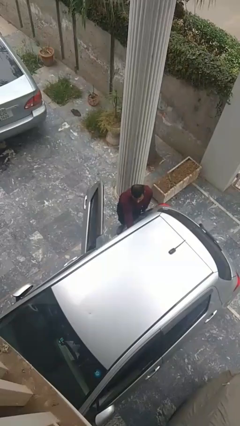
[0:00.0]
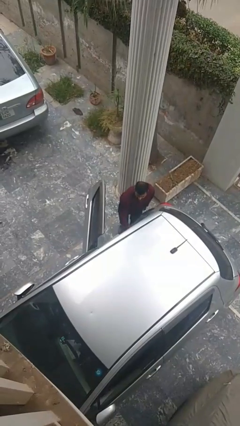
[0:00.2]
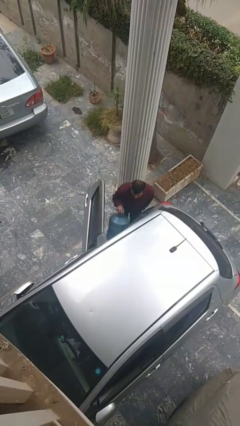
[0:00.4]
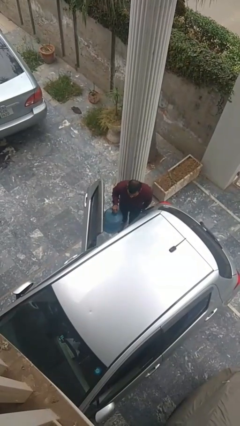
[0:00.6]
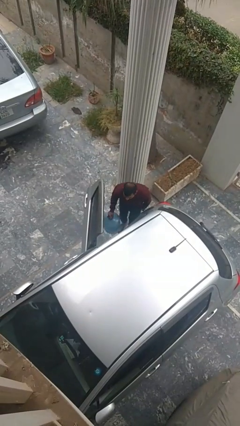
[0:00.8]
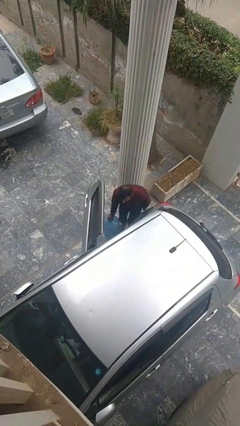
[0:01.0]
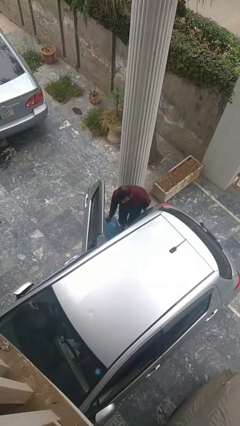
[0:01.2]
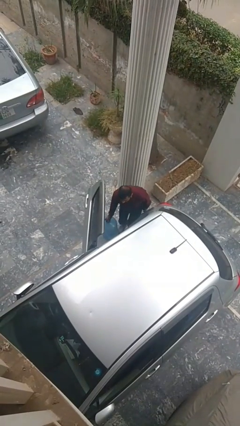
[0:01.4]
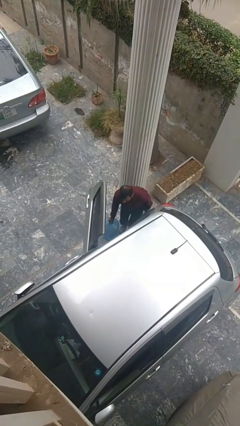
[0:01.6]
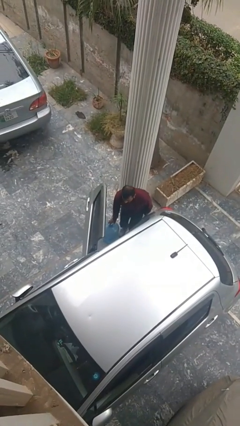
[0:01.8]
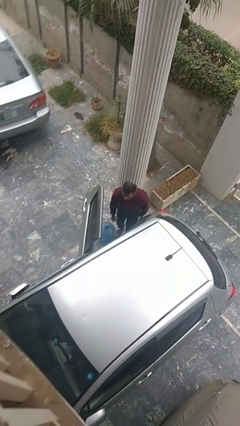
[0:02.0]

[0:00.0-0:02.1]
person unloads car

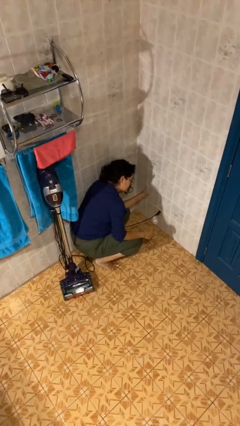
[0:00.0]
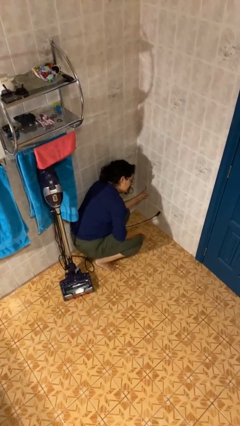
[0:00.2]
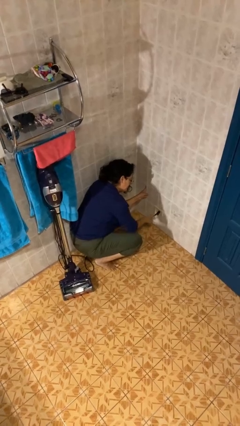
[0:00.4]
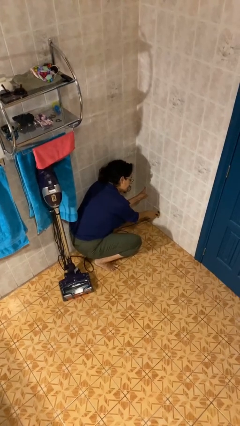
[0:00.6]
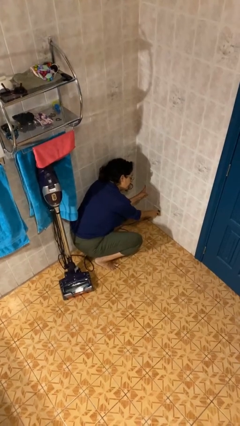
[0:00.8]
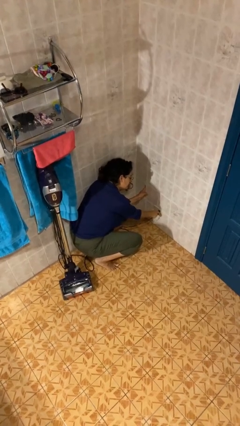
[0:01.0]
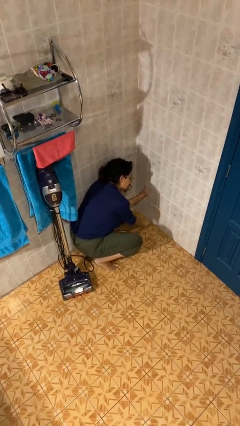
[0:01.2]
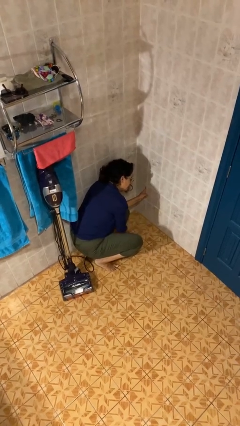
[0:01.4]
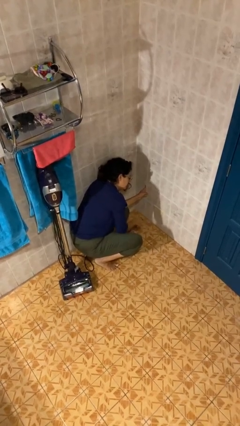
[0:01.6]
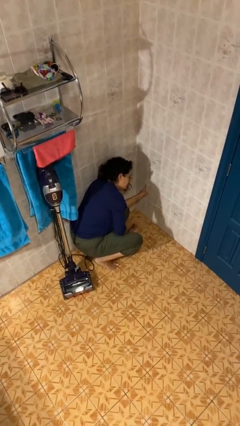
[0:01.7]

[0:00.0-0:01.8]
person unplugs from electrical socket

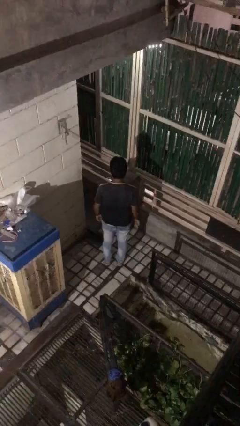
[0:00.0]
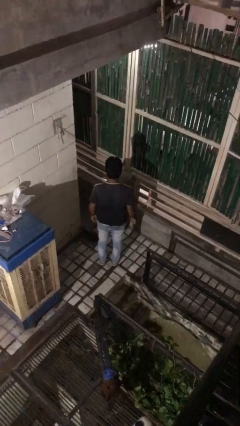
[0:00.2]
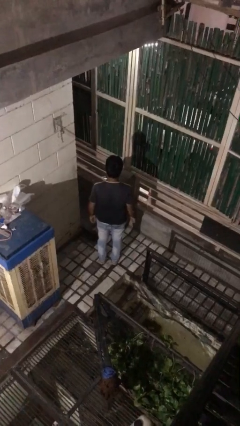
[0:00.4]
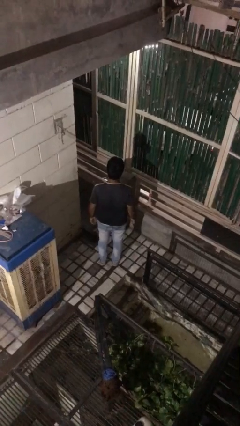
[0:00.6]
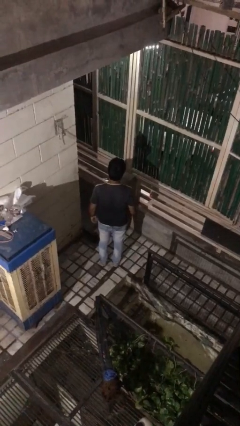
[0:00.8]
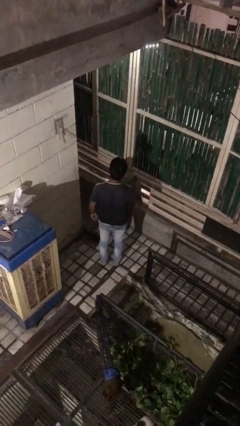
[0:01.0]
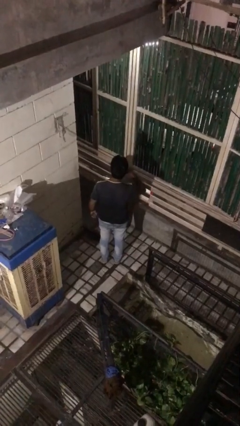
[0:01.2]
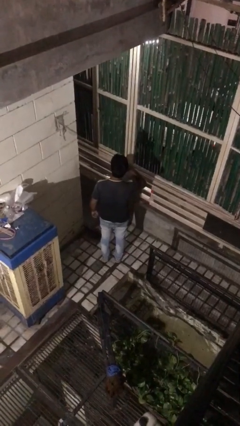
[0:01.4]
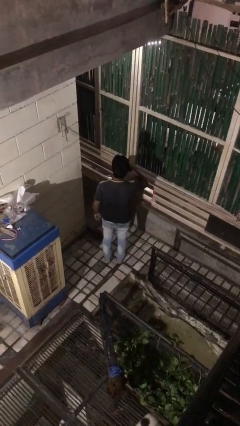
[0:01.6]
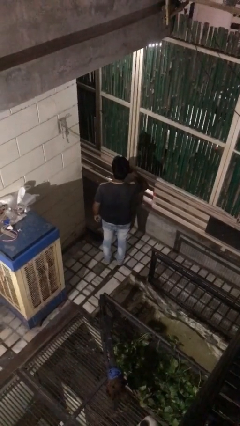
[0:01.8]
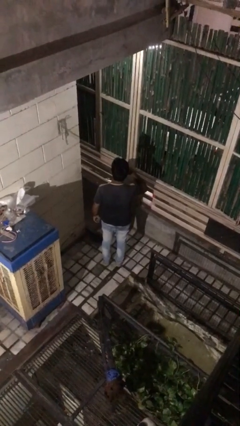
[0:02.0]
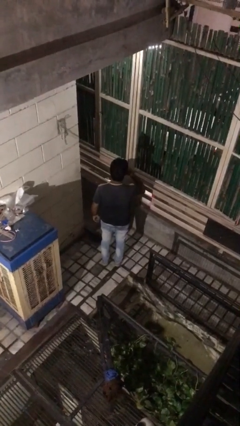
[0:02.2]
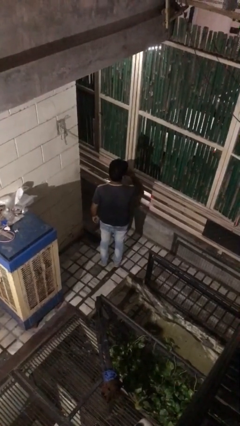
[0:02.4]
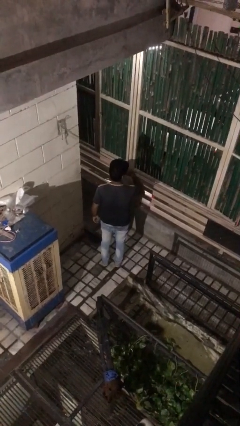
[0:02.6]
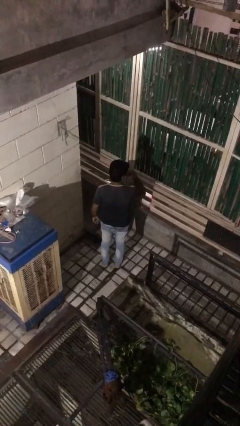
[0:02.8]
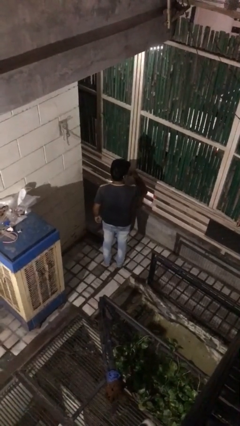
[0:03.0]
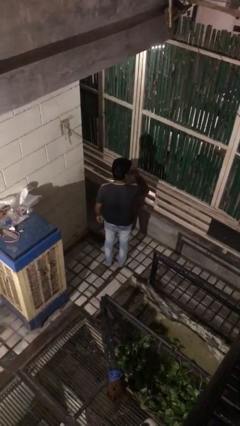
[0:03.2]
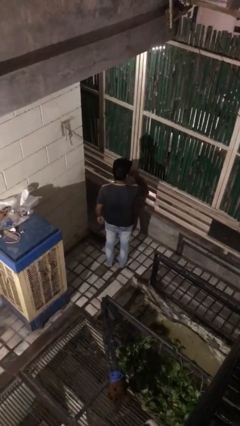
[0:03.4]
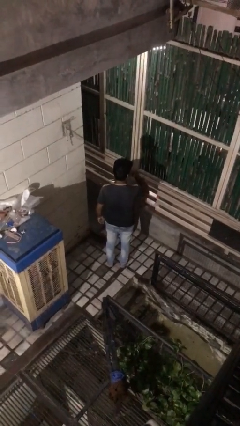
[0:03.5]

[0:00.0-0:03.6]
person brushes teeth

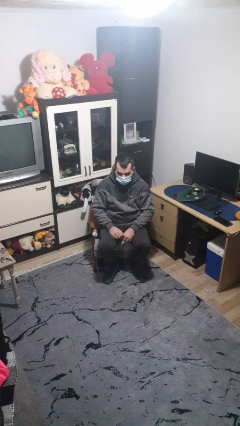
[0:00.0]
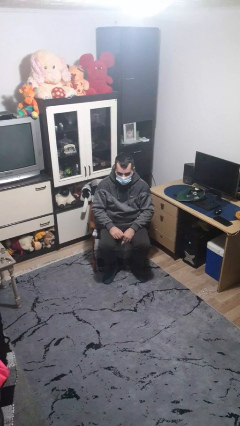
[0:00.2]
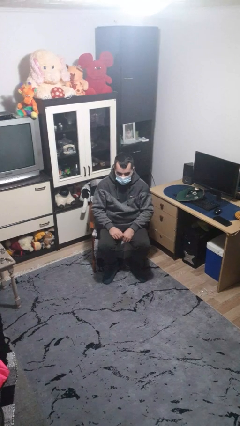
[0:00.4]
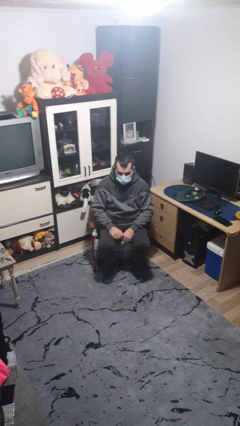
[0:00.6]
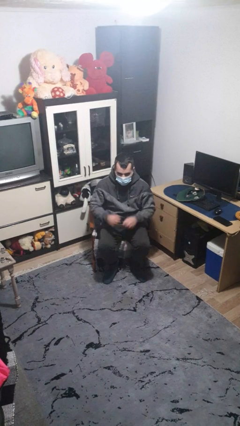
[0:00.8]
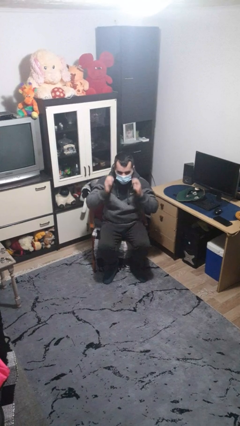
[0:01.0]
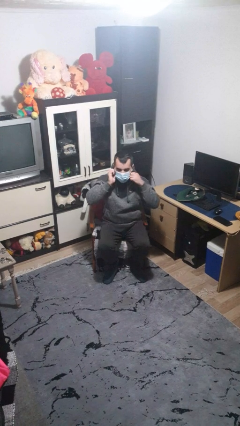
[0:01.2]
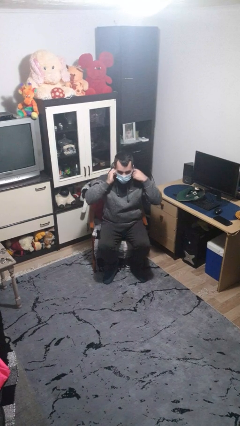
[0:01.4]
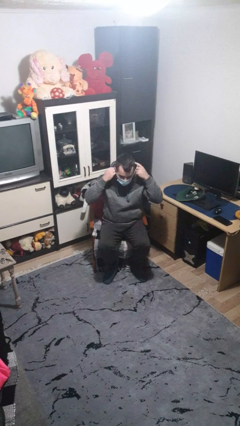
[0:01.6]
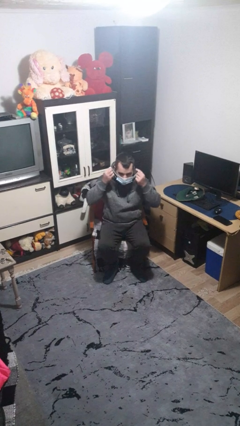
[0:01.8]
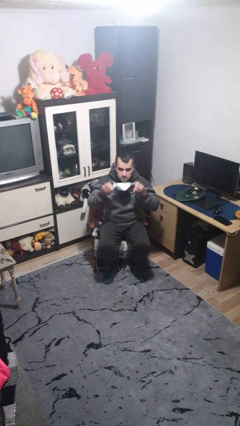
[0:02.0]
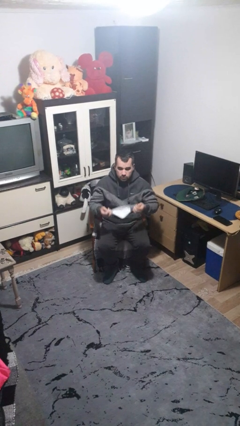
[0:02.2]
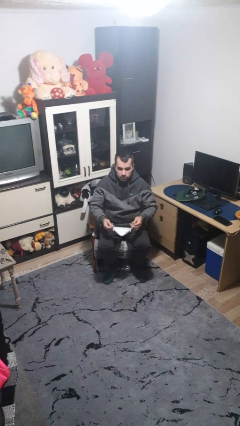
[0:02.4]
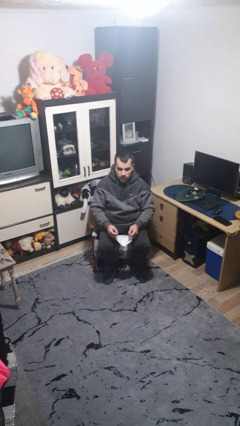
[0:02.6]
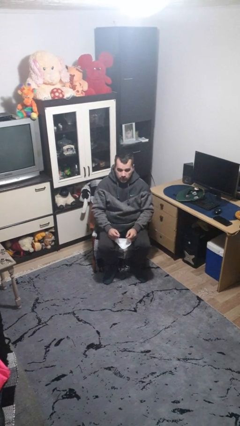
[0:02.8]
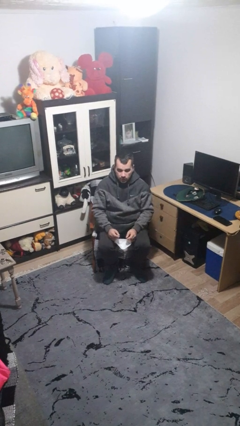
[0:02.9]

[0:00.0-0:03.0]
person takes off facemask

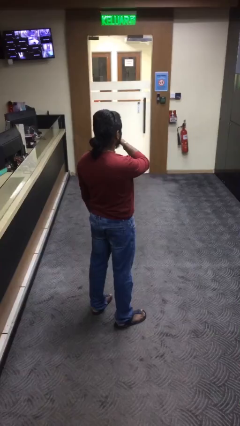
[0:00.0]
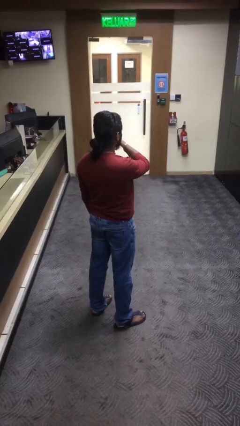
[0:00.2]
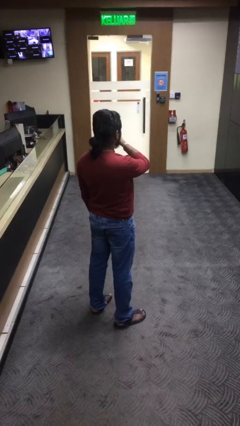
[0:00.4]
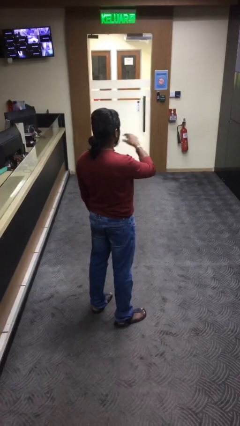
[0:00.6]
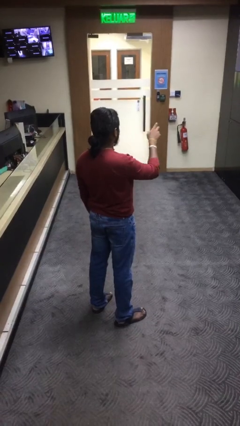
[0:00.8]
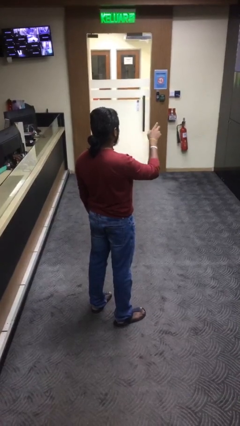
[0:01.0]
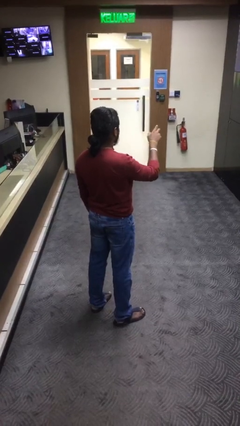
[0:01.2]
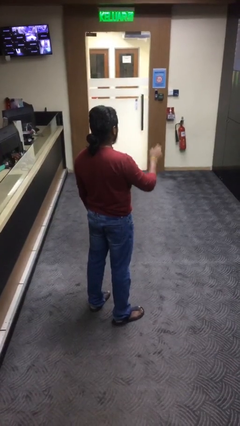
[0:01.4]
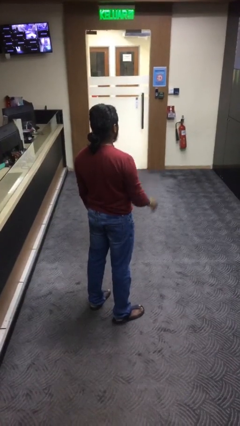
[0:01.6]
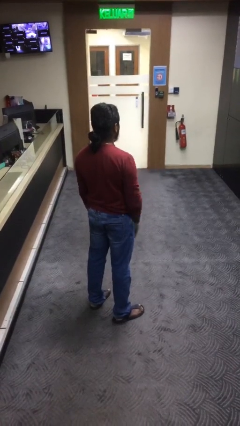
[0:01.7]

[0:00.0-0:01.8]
person gestures swipe right

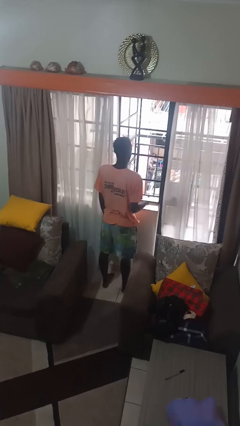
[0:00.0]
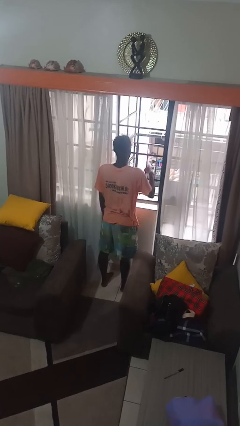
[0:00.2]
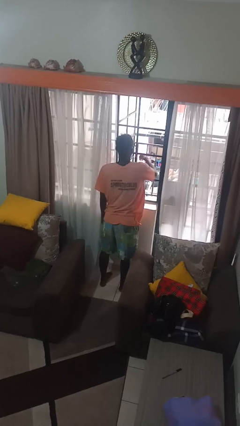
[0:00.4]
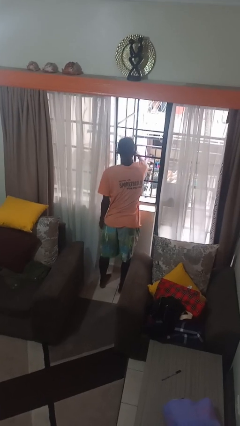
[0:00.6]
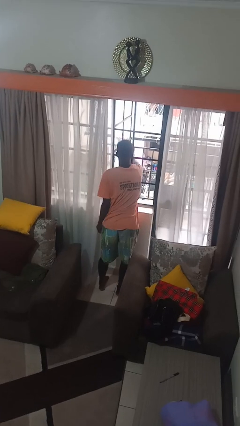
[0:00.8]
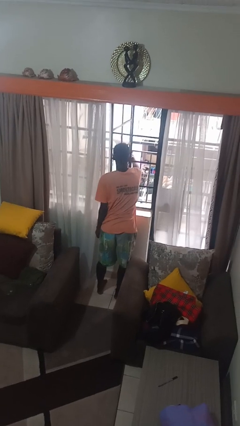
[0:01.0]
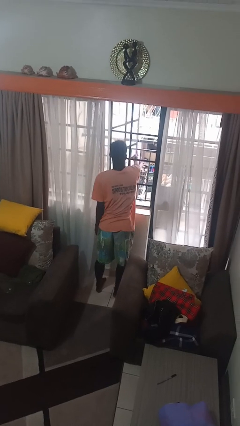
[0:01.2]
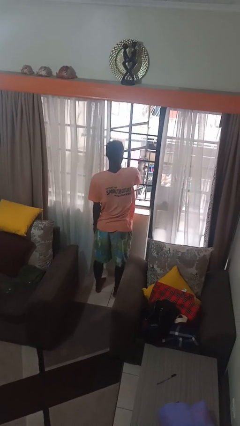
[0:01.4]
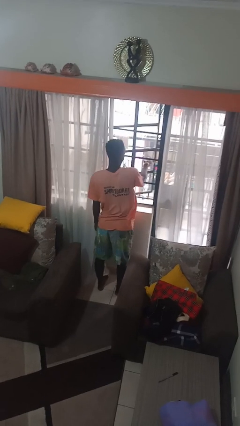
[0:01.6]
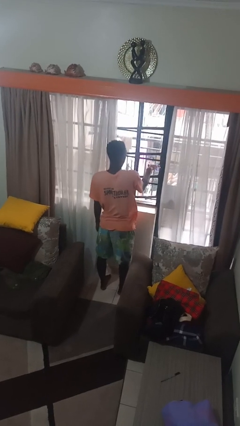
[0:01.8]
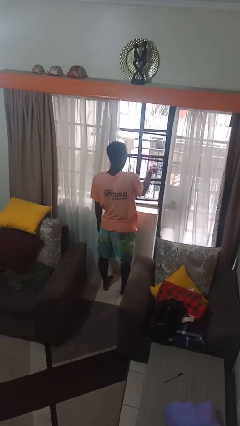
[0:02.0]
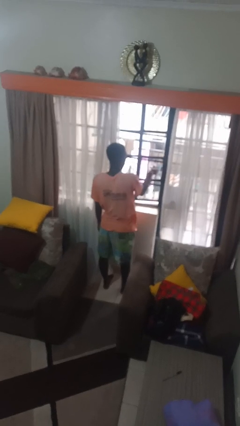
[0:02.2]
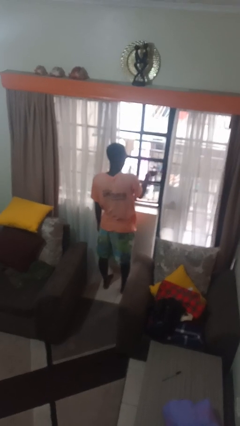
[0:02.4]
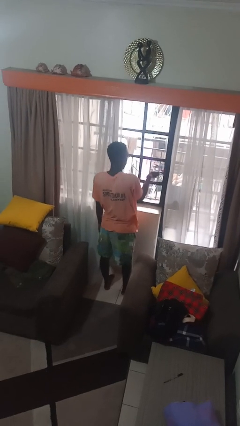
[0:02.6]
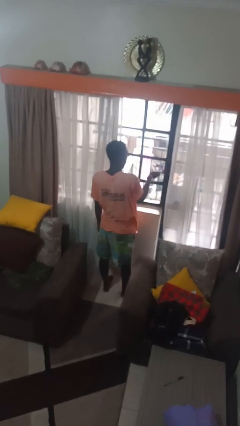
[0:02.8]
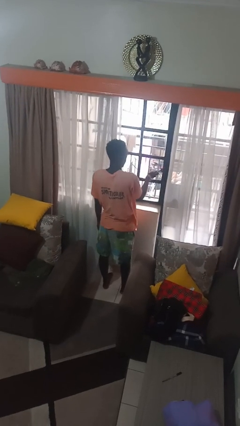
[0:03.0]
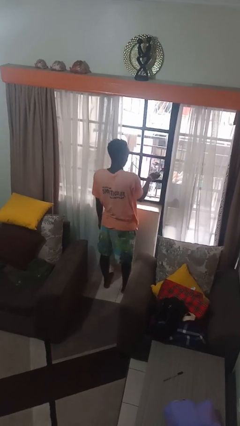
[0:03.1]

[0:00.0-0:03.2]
person closes home window

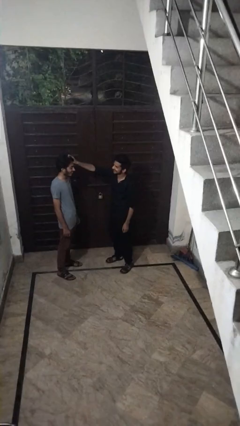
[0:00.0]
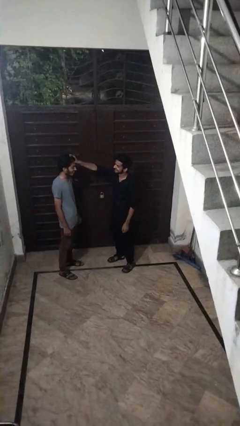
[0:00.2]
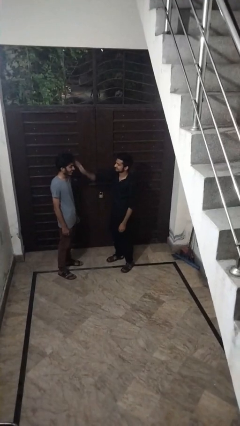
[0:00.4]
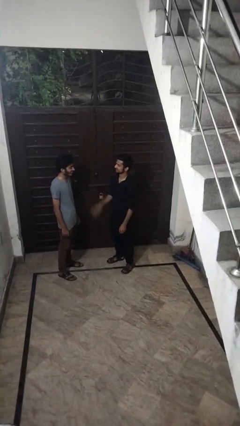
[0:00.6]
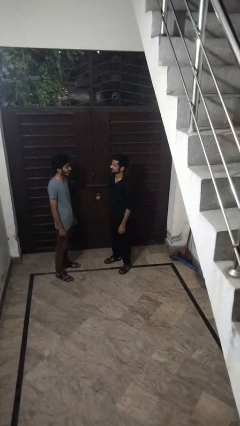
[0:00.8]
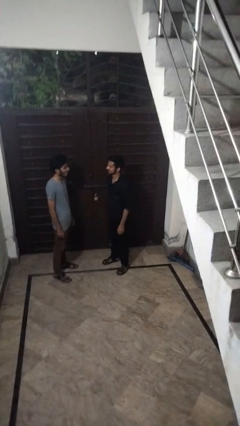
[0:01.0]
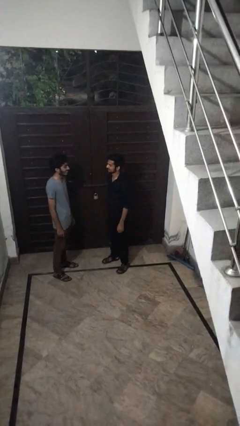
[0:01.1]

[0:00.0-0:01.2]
person grabs person by hair

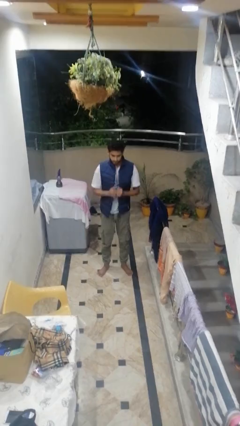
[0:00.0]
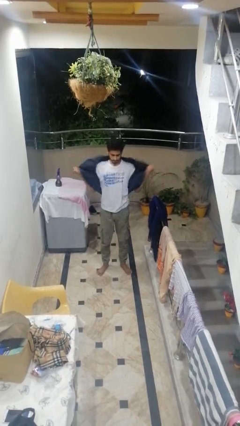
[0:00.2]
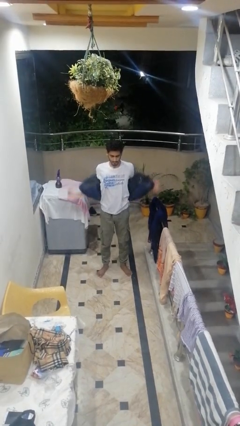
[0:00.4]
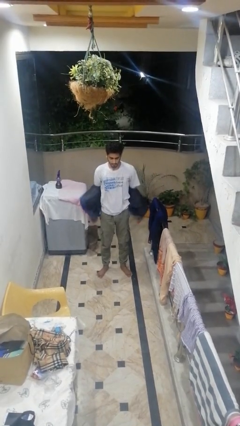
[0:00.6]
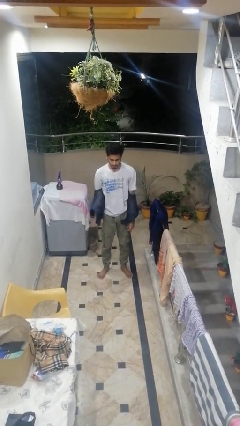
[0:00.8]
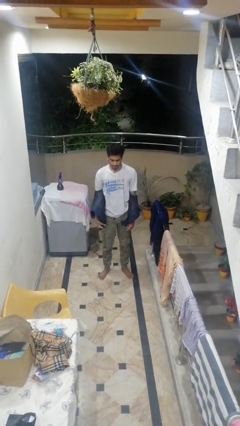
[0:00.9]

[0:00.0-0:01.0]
person takes off jacket
